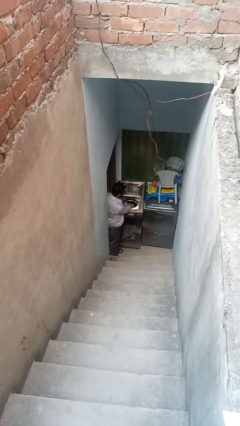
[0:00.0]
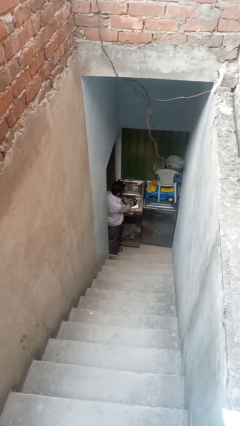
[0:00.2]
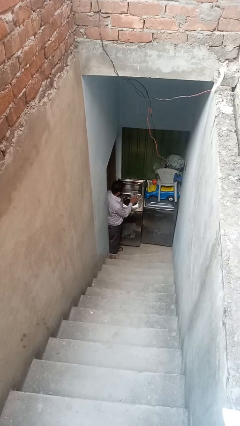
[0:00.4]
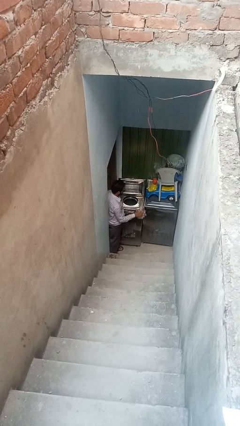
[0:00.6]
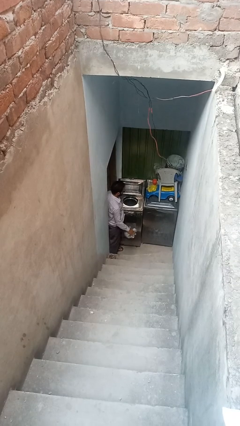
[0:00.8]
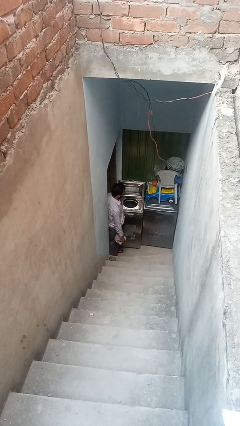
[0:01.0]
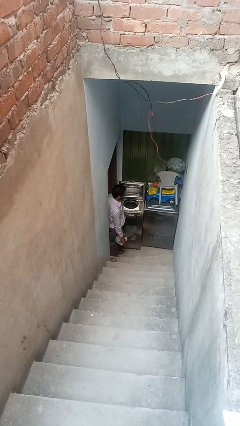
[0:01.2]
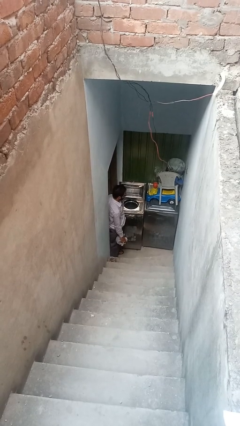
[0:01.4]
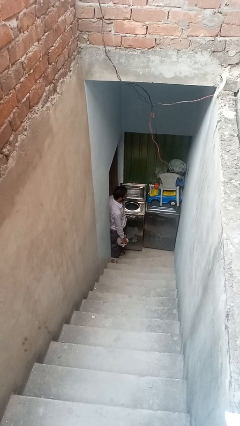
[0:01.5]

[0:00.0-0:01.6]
person unloads clotheswasher

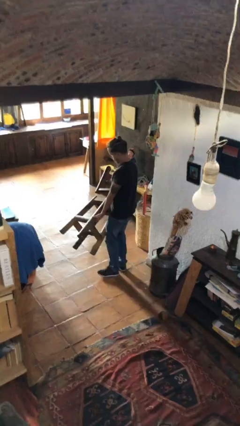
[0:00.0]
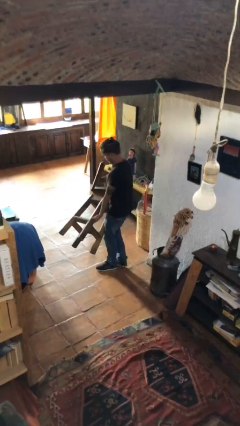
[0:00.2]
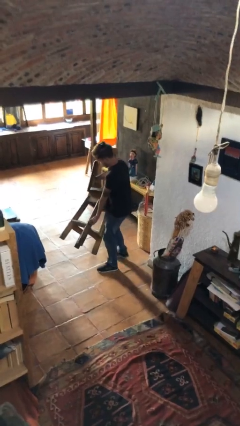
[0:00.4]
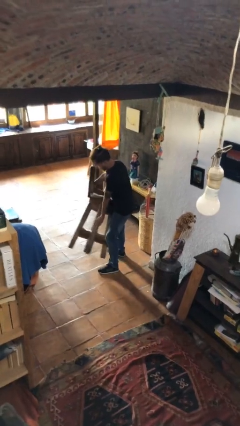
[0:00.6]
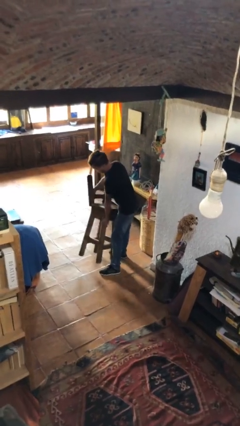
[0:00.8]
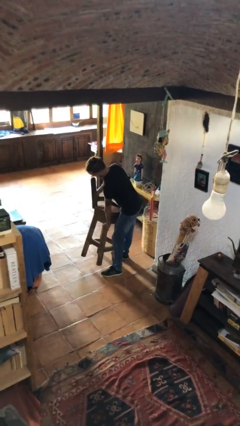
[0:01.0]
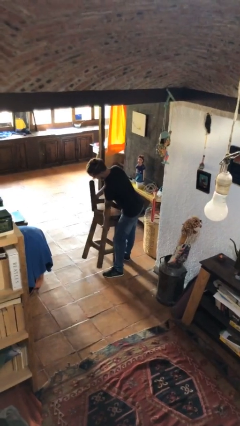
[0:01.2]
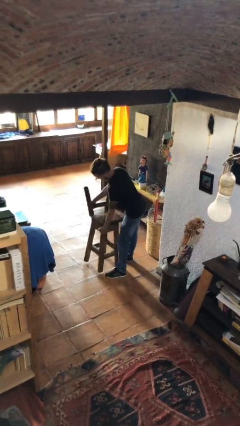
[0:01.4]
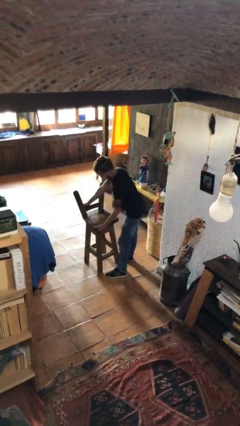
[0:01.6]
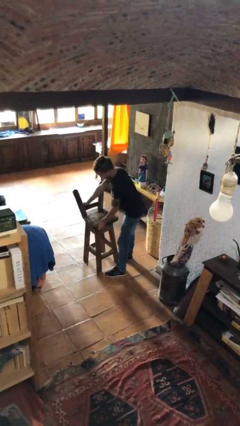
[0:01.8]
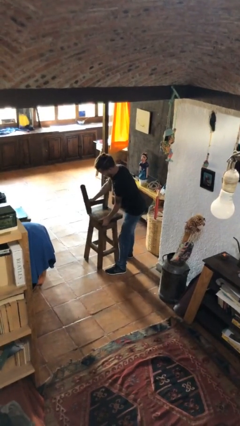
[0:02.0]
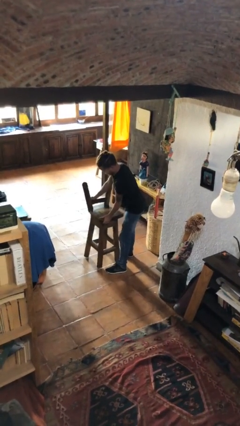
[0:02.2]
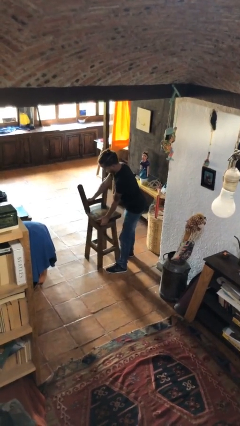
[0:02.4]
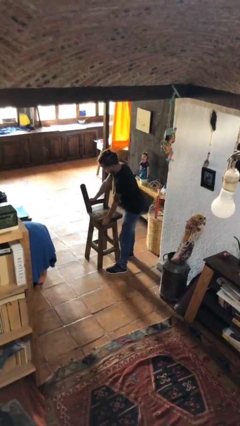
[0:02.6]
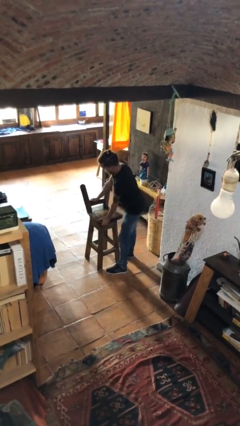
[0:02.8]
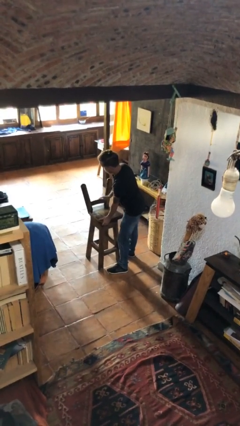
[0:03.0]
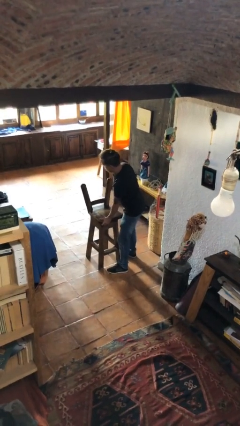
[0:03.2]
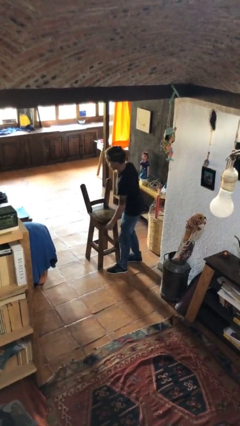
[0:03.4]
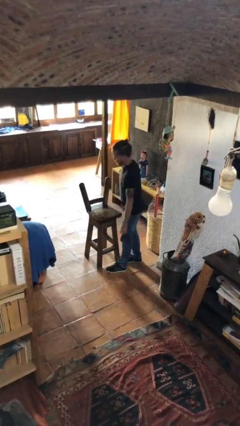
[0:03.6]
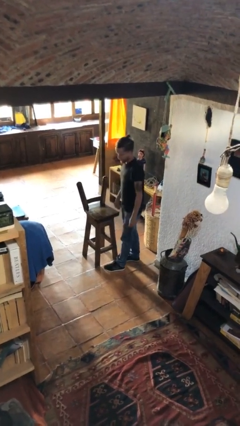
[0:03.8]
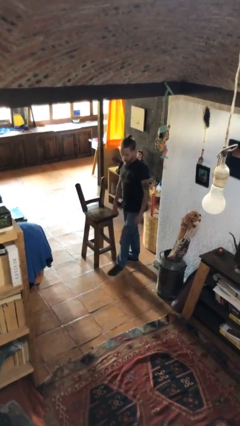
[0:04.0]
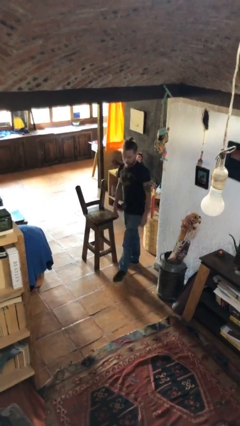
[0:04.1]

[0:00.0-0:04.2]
person puts down object on floor

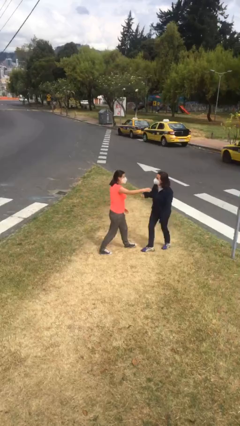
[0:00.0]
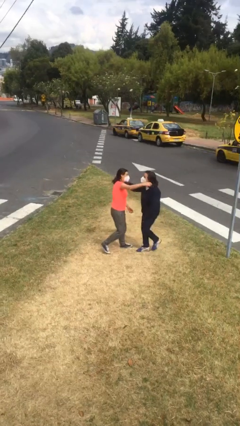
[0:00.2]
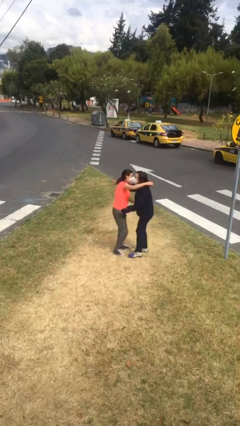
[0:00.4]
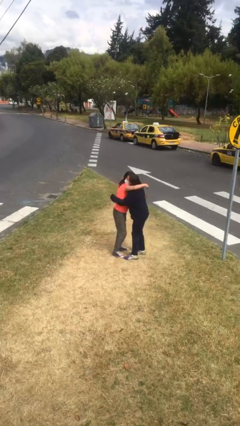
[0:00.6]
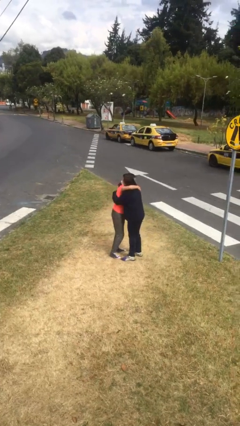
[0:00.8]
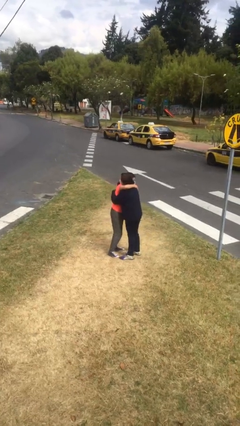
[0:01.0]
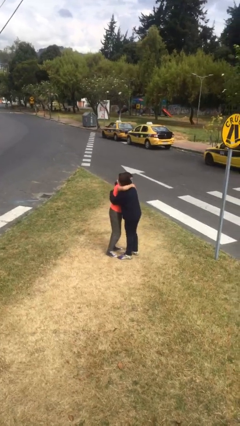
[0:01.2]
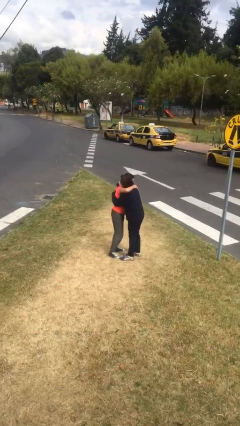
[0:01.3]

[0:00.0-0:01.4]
person embraces person

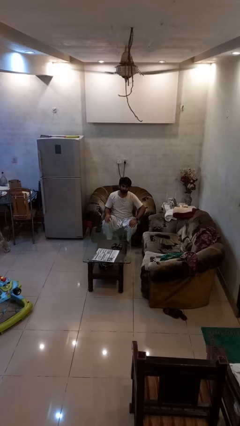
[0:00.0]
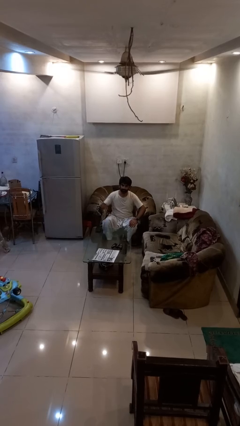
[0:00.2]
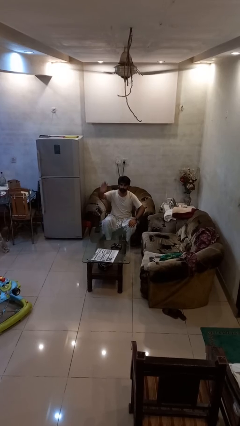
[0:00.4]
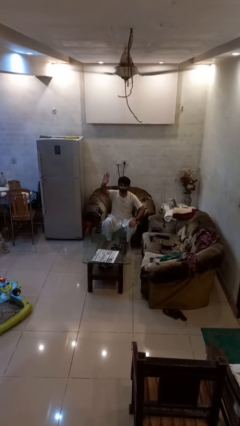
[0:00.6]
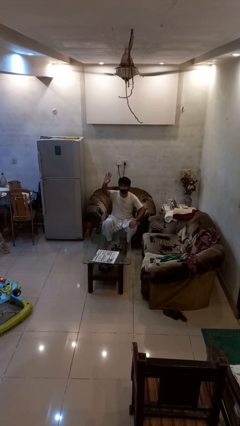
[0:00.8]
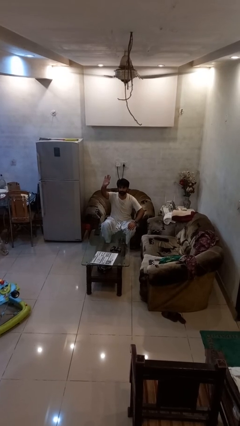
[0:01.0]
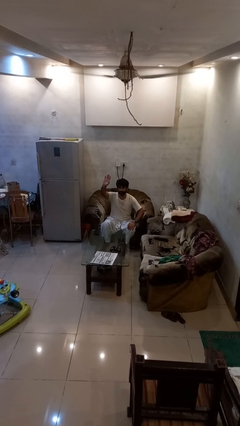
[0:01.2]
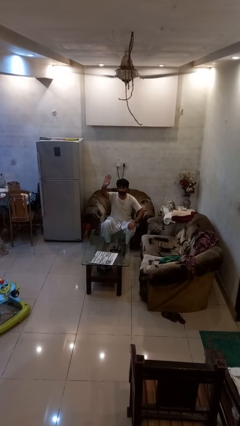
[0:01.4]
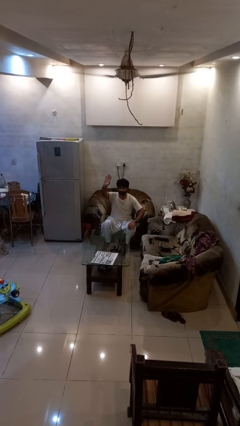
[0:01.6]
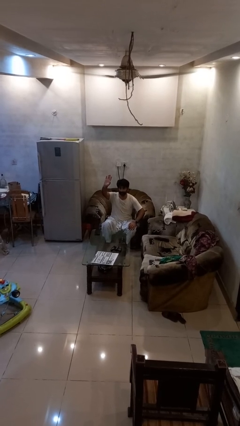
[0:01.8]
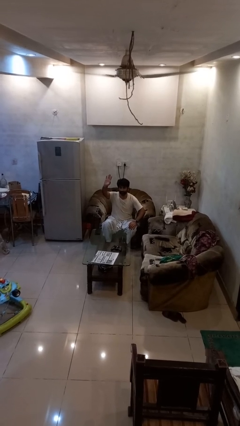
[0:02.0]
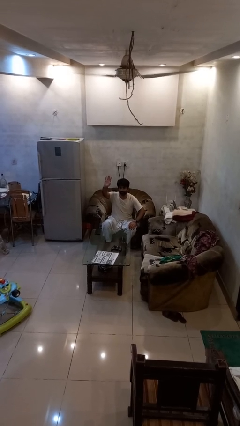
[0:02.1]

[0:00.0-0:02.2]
person gestures raise hand

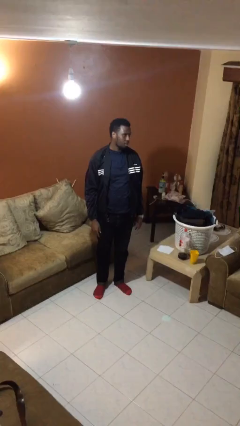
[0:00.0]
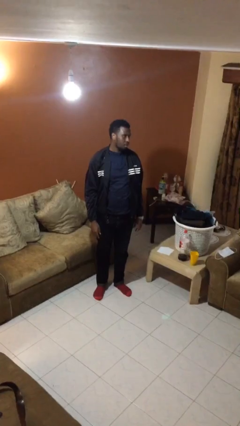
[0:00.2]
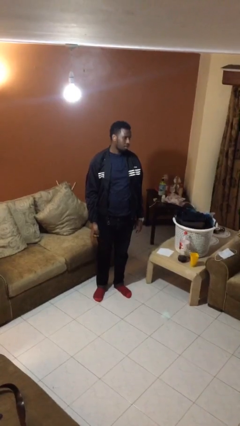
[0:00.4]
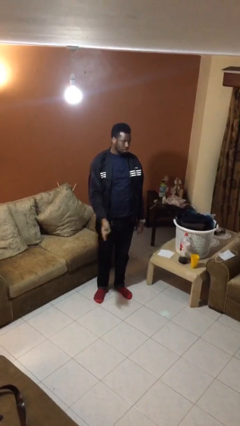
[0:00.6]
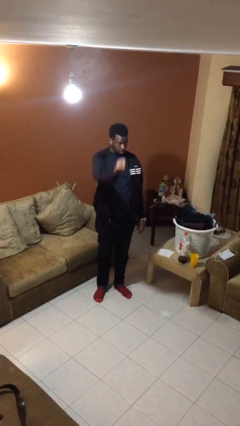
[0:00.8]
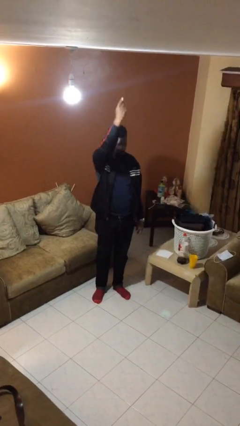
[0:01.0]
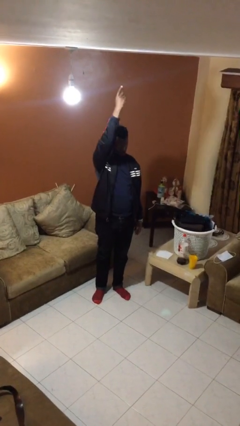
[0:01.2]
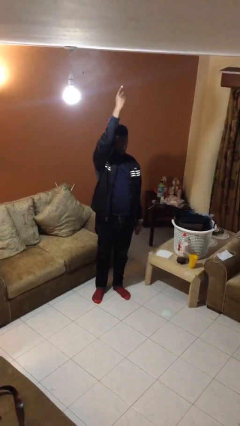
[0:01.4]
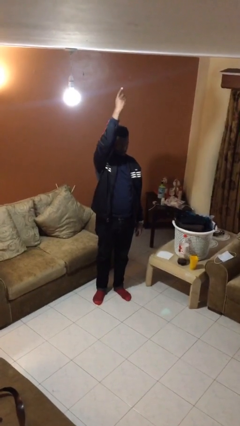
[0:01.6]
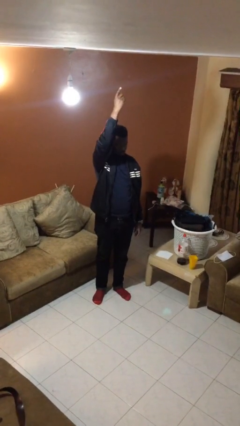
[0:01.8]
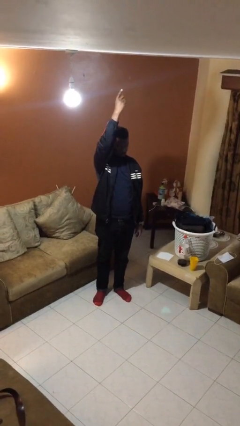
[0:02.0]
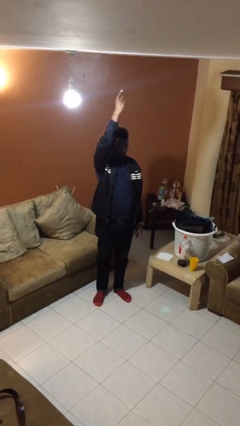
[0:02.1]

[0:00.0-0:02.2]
person gestures swipe up

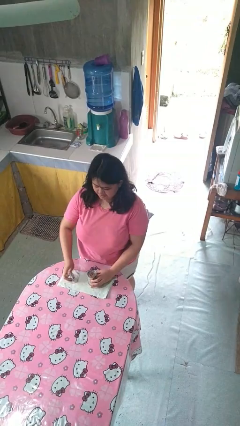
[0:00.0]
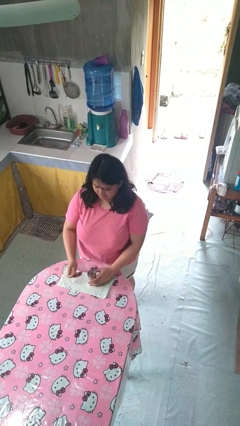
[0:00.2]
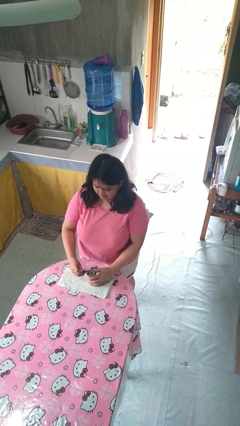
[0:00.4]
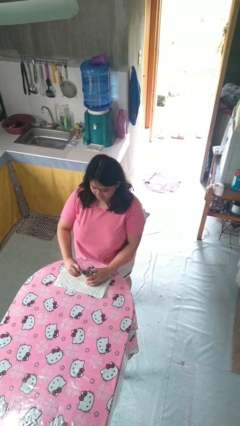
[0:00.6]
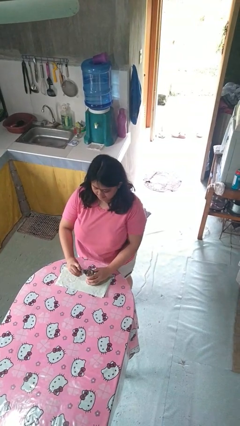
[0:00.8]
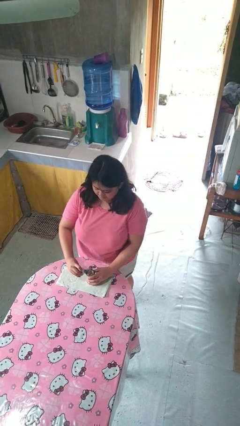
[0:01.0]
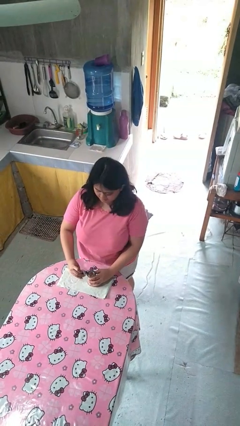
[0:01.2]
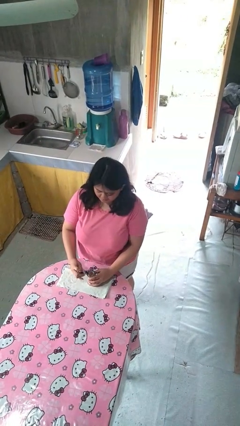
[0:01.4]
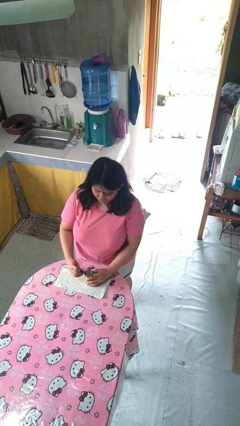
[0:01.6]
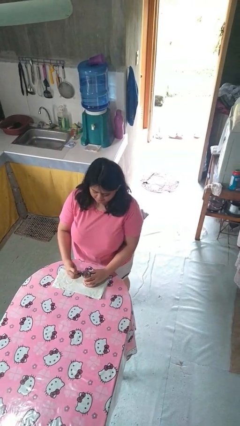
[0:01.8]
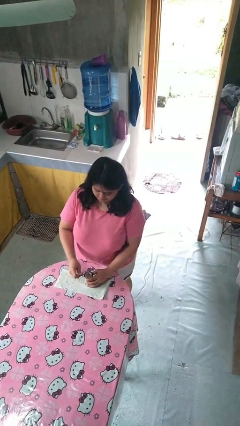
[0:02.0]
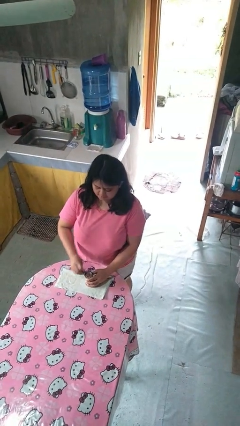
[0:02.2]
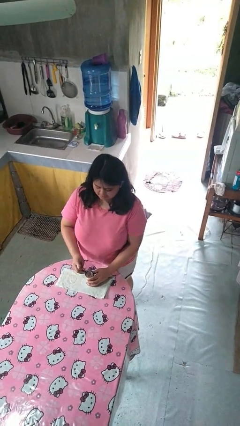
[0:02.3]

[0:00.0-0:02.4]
person opens can with can opener

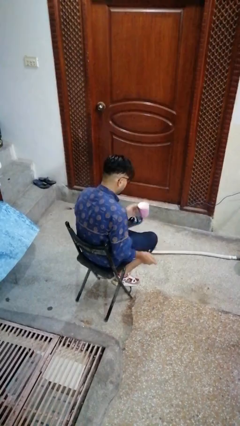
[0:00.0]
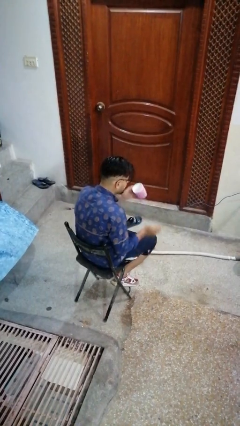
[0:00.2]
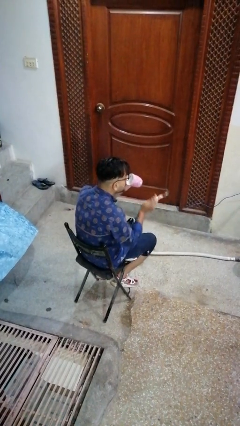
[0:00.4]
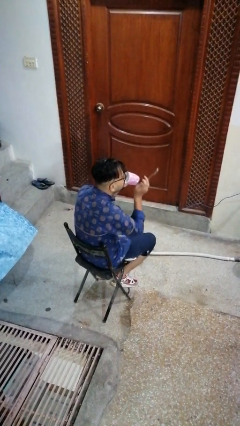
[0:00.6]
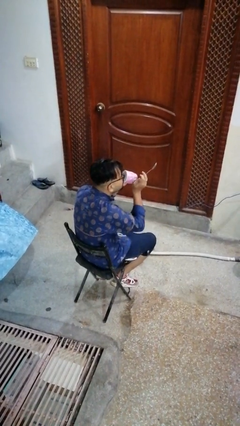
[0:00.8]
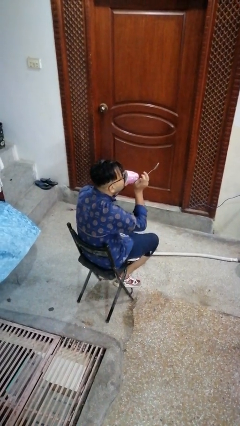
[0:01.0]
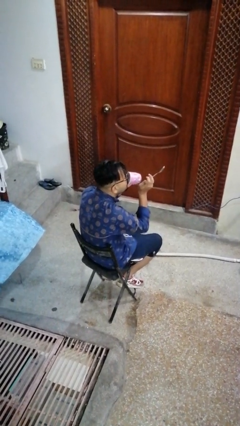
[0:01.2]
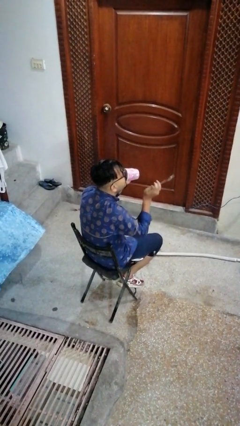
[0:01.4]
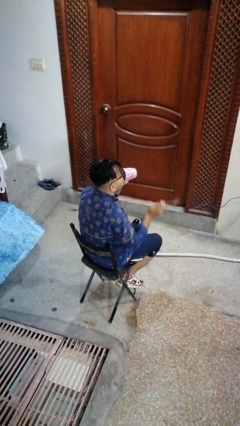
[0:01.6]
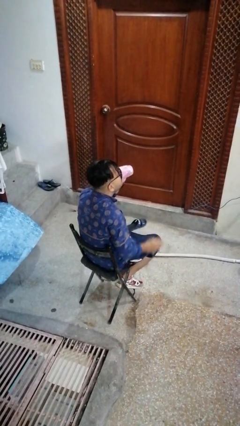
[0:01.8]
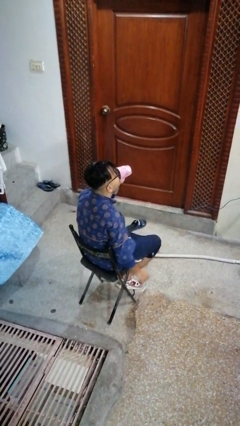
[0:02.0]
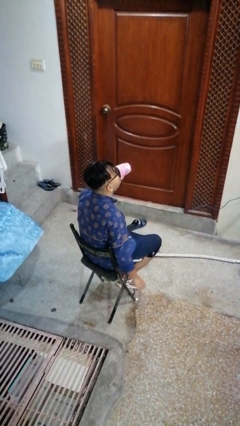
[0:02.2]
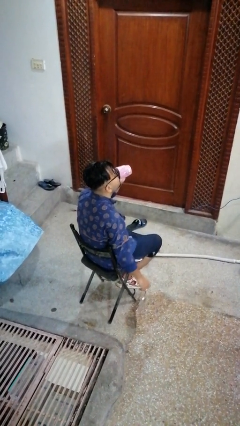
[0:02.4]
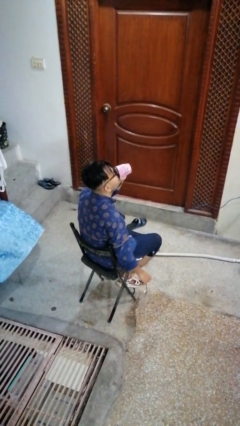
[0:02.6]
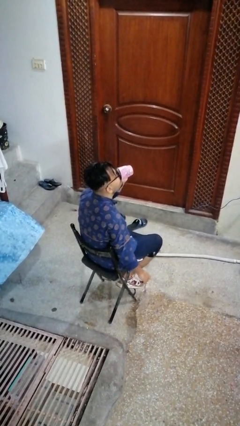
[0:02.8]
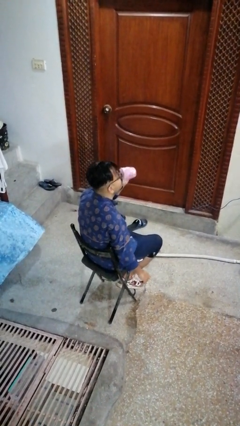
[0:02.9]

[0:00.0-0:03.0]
person drinks from mug
